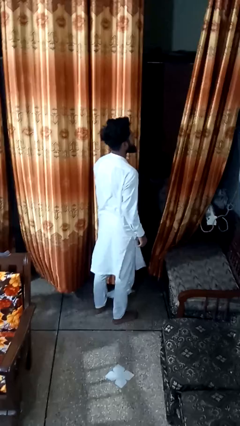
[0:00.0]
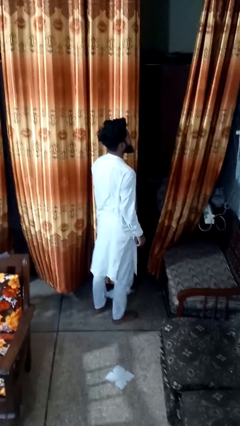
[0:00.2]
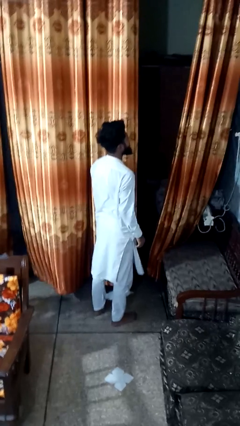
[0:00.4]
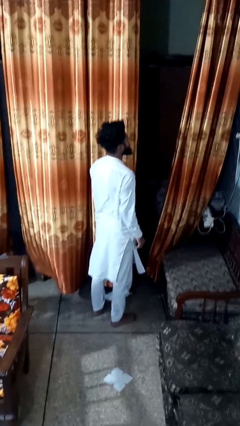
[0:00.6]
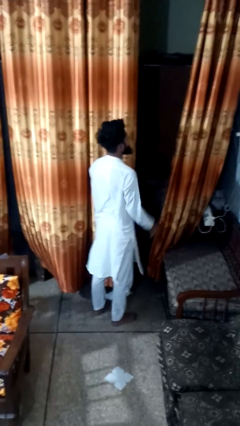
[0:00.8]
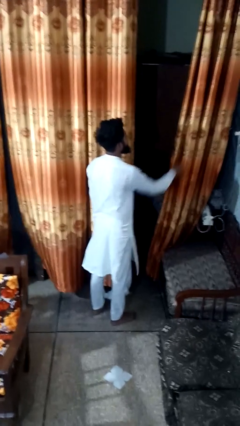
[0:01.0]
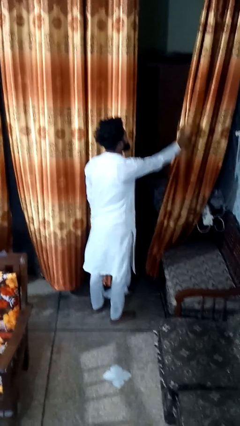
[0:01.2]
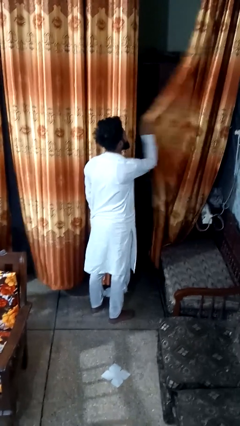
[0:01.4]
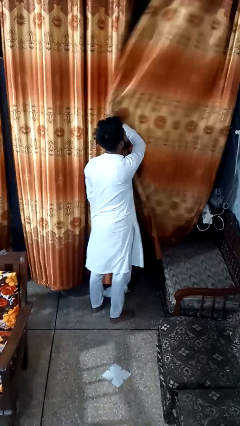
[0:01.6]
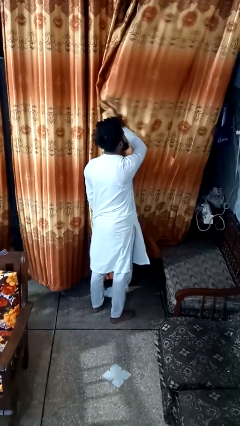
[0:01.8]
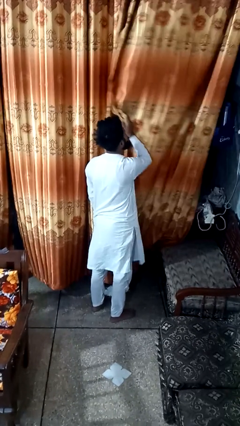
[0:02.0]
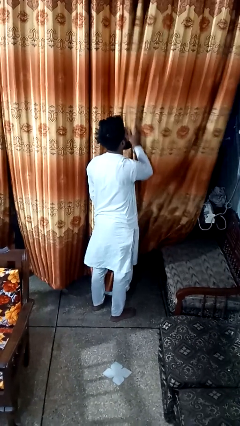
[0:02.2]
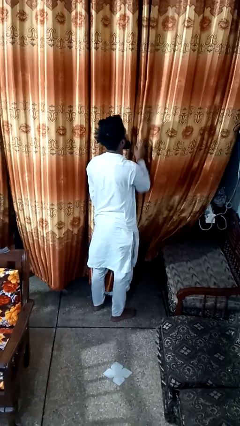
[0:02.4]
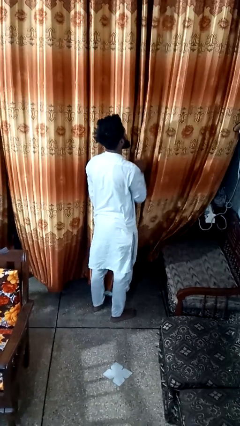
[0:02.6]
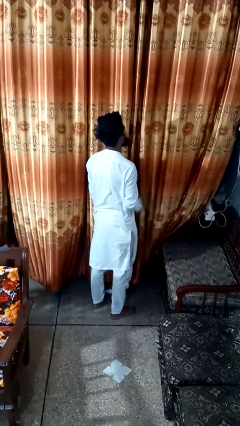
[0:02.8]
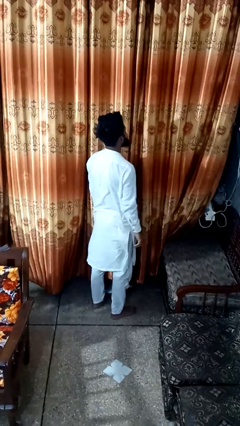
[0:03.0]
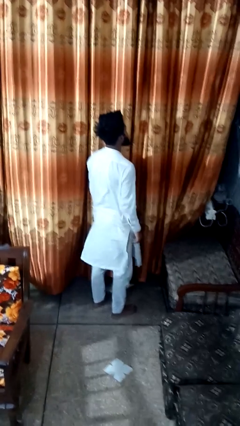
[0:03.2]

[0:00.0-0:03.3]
person closes curtains

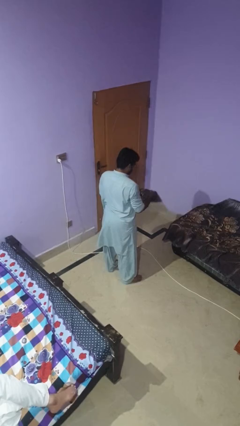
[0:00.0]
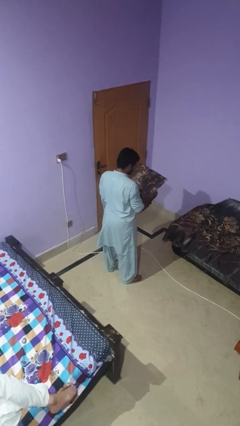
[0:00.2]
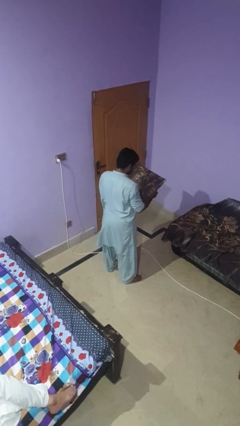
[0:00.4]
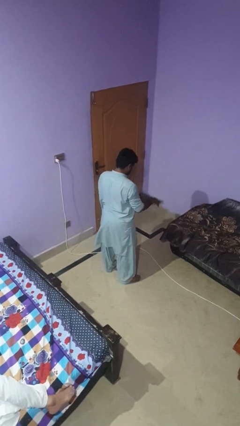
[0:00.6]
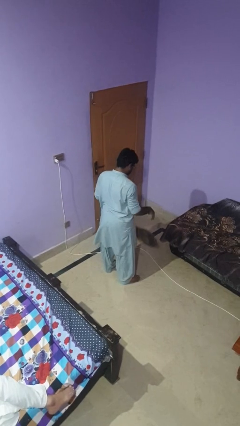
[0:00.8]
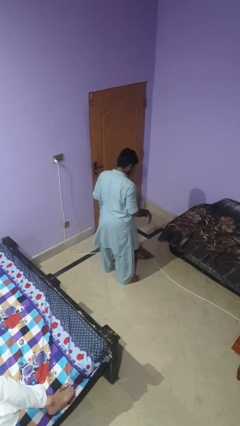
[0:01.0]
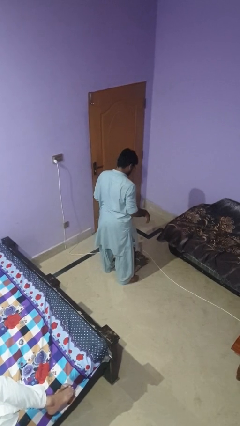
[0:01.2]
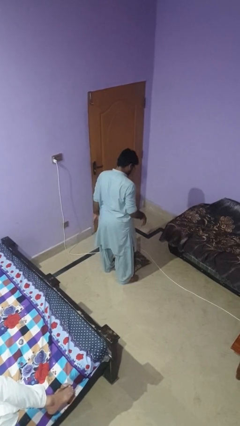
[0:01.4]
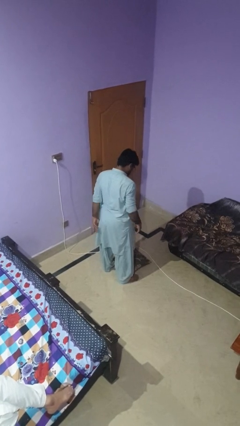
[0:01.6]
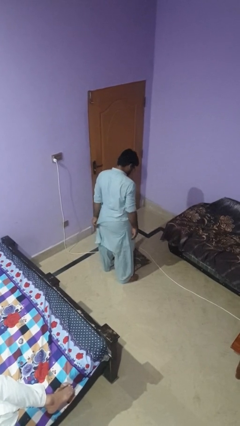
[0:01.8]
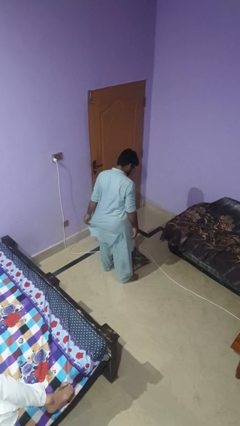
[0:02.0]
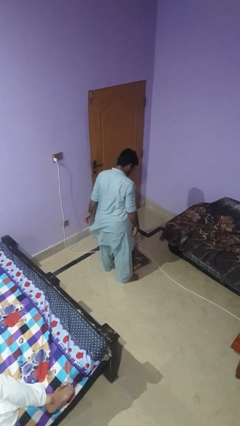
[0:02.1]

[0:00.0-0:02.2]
person drops object

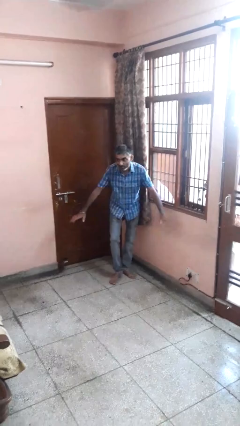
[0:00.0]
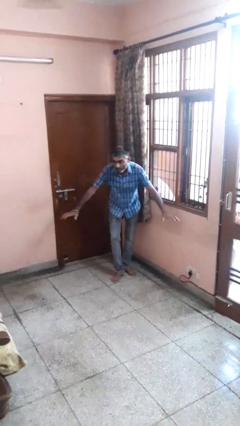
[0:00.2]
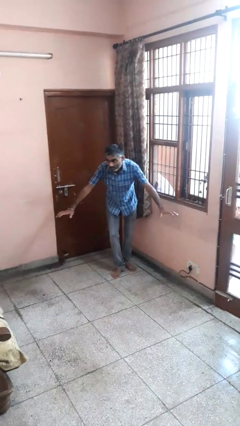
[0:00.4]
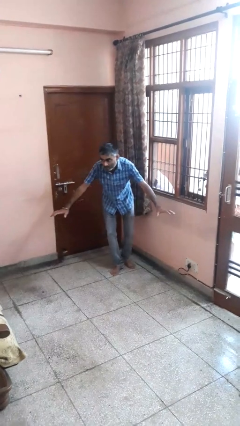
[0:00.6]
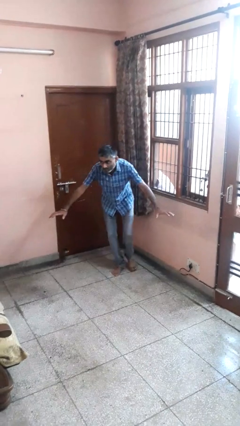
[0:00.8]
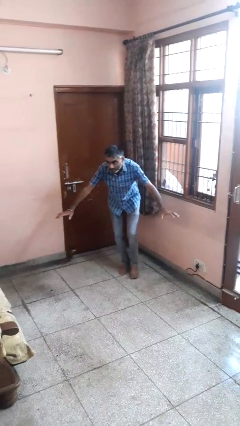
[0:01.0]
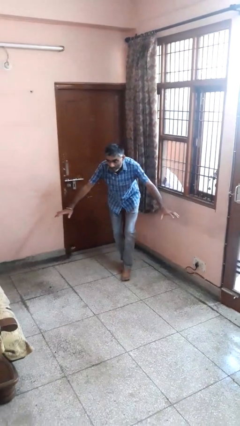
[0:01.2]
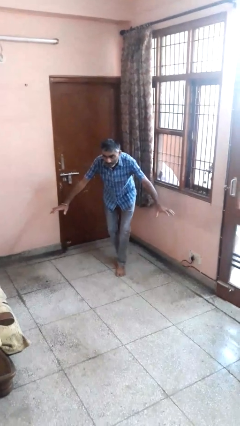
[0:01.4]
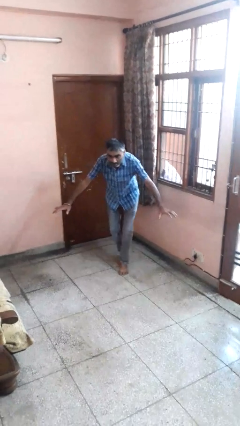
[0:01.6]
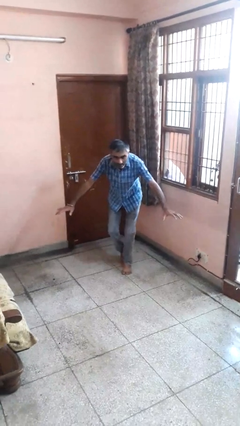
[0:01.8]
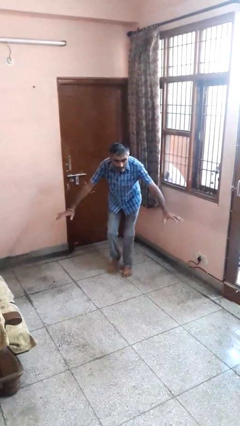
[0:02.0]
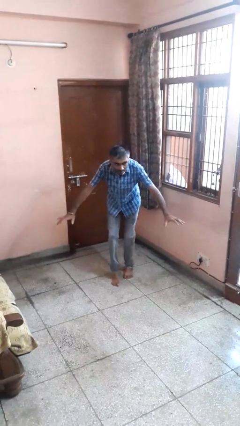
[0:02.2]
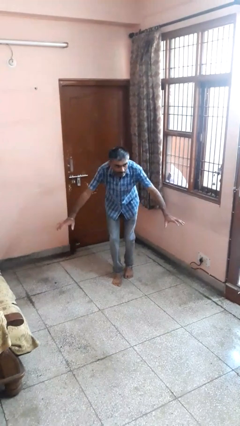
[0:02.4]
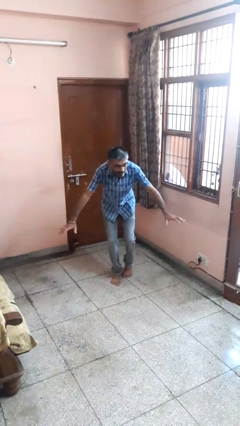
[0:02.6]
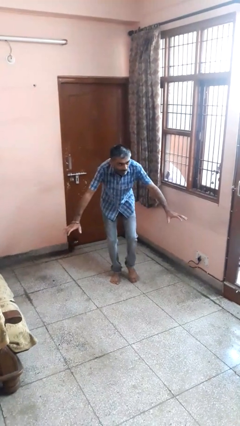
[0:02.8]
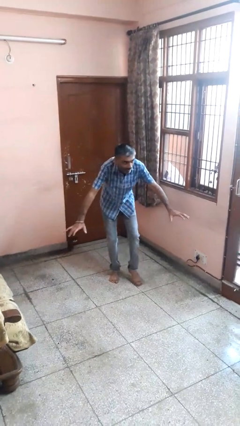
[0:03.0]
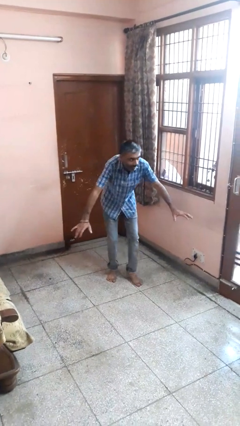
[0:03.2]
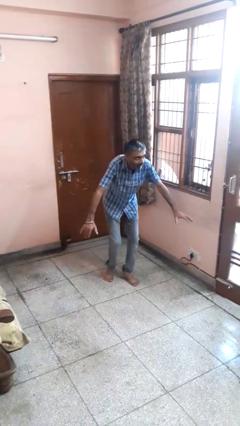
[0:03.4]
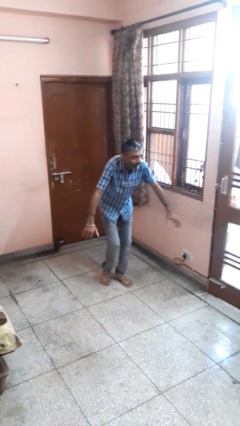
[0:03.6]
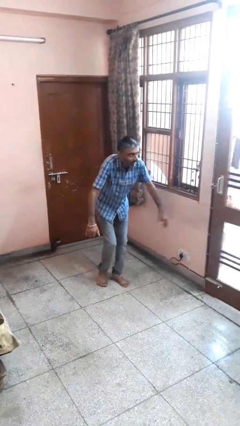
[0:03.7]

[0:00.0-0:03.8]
person walks tiptoe

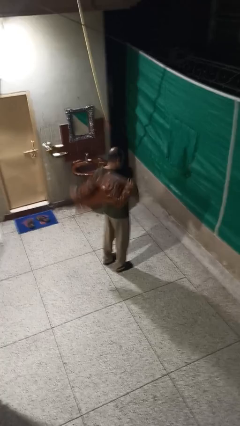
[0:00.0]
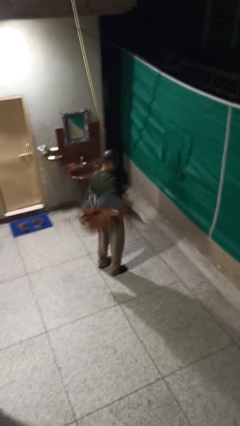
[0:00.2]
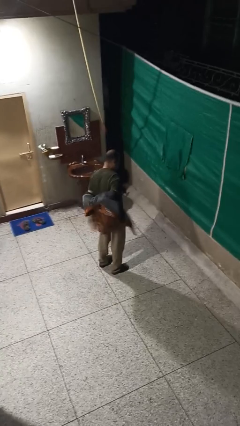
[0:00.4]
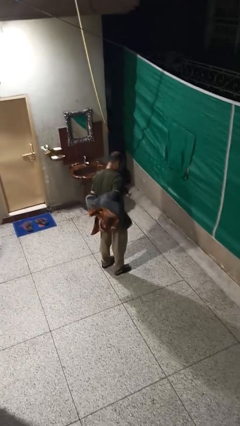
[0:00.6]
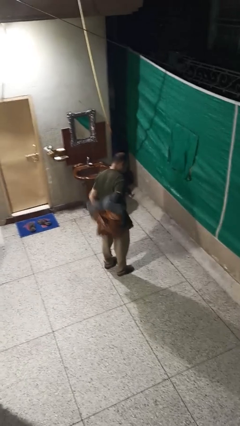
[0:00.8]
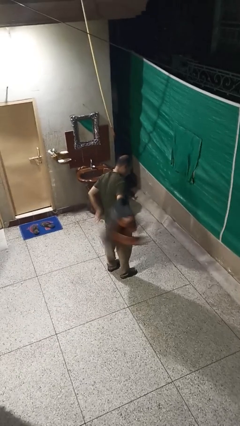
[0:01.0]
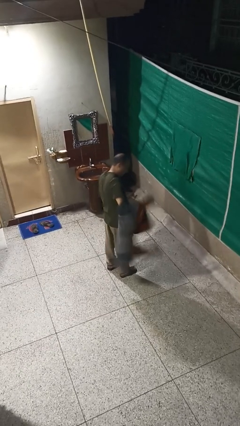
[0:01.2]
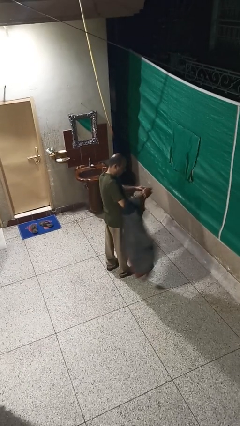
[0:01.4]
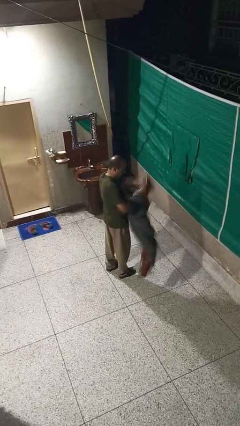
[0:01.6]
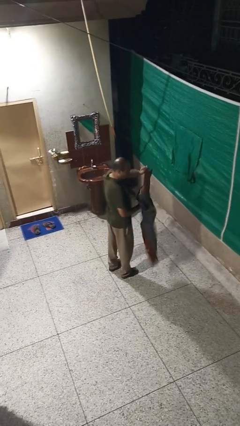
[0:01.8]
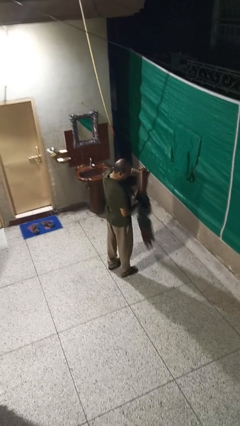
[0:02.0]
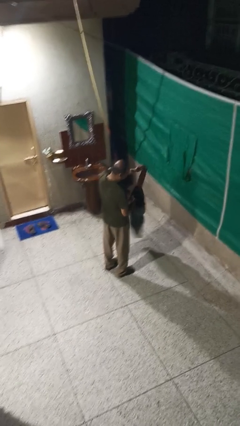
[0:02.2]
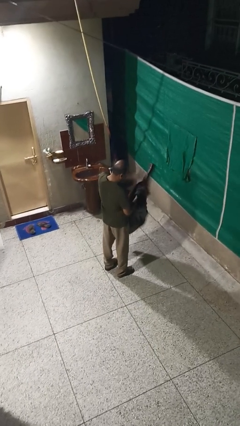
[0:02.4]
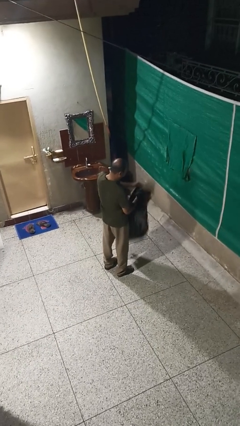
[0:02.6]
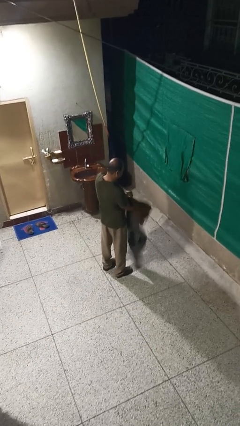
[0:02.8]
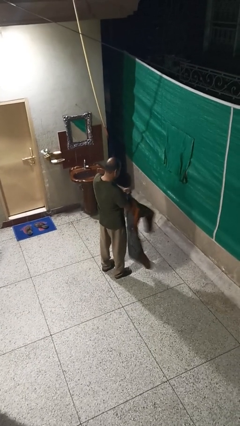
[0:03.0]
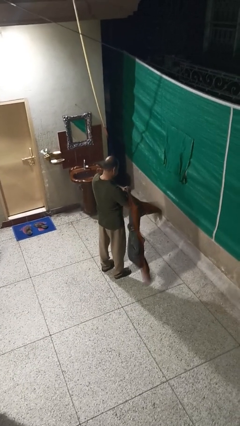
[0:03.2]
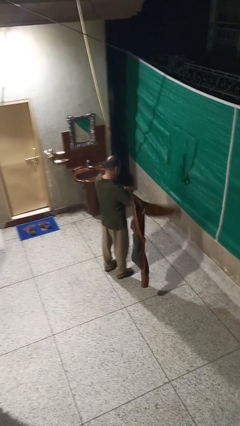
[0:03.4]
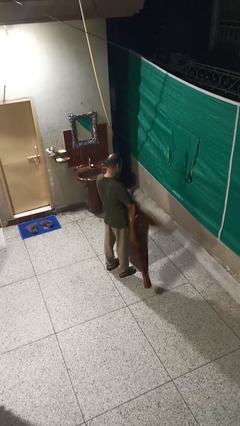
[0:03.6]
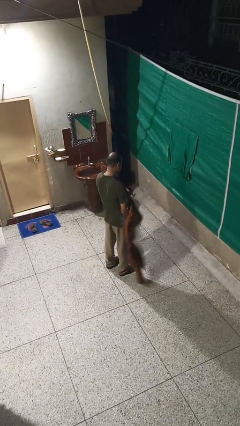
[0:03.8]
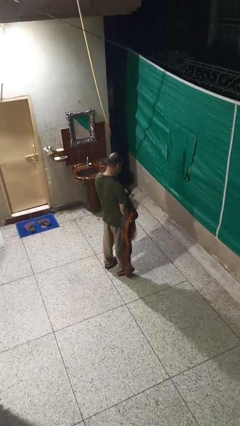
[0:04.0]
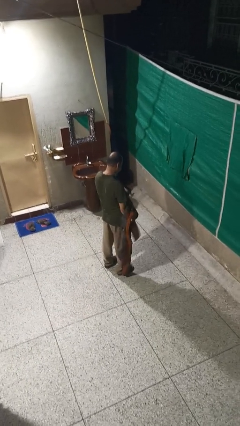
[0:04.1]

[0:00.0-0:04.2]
person takes off jacket

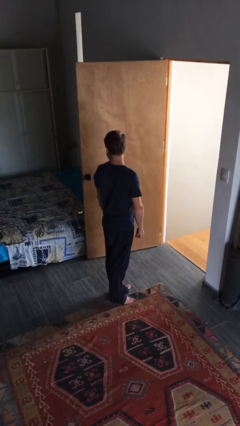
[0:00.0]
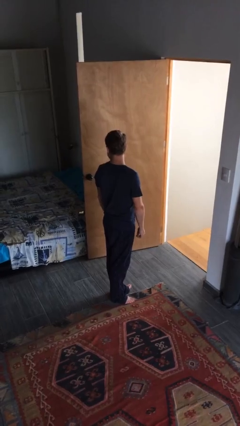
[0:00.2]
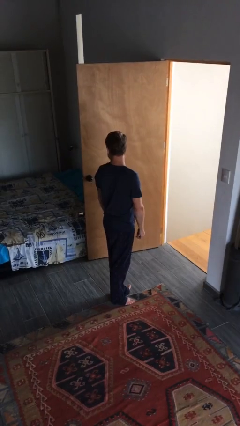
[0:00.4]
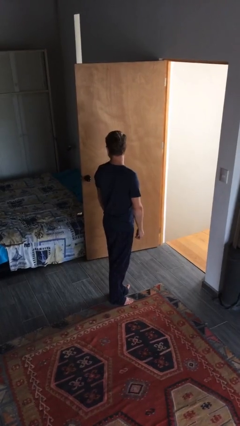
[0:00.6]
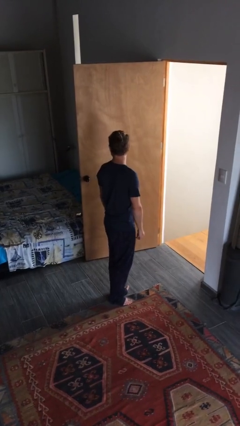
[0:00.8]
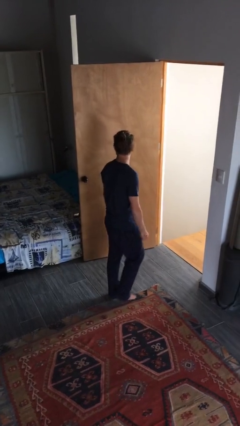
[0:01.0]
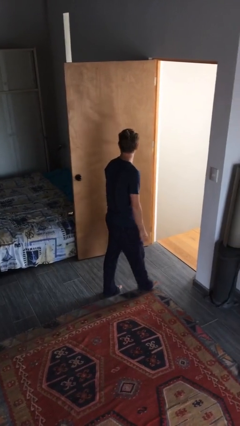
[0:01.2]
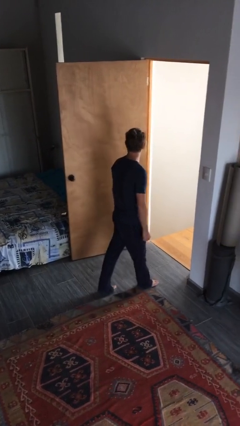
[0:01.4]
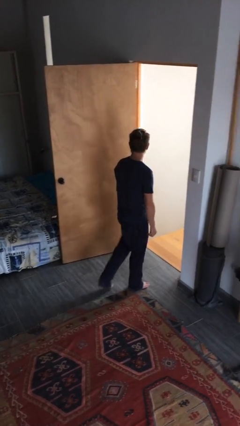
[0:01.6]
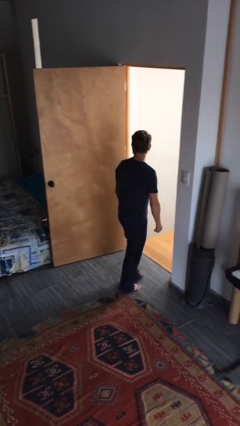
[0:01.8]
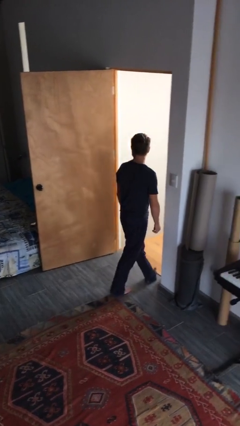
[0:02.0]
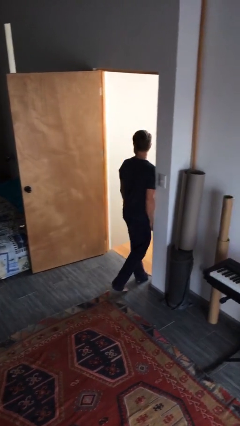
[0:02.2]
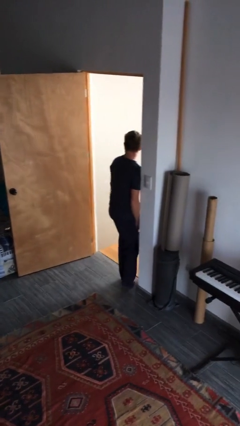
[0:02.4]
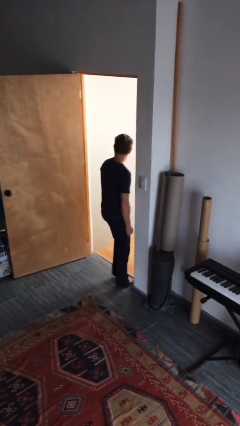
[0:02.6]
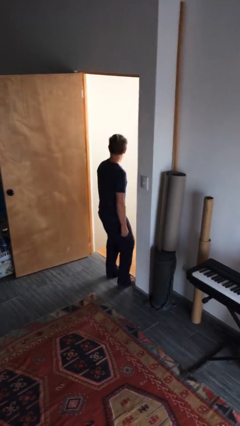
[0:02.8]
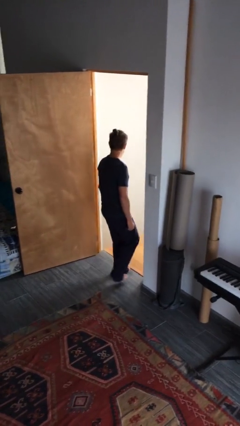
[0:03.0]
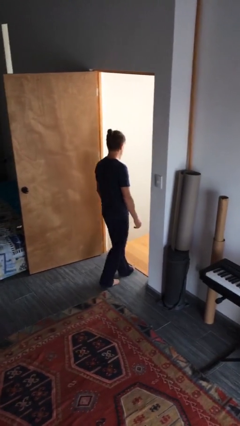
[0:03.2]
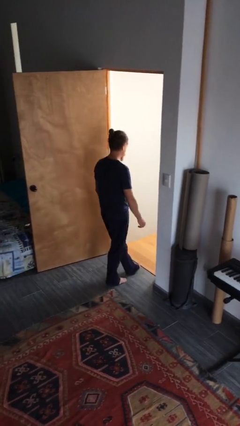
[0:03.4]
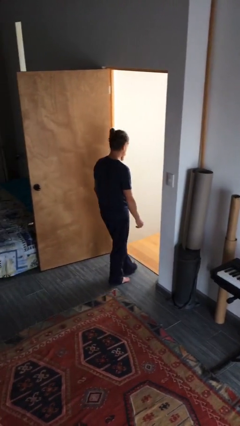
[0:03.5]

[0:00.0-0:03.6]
person bumps into wall

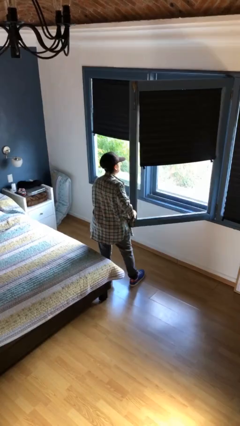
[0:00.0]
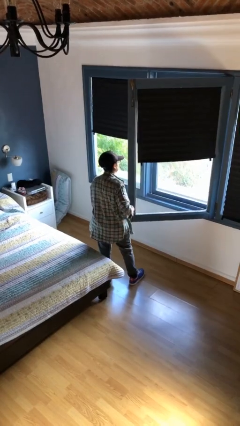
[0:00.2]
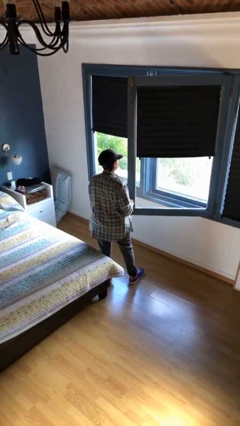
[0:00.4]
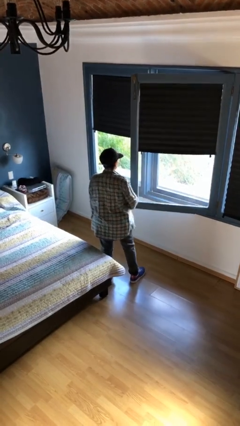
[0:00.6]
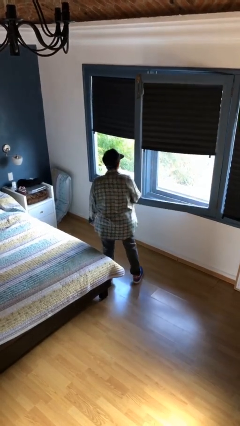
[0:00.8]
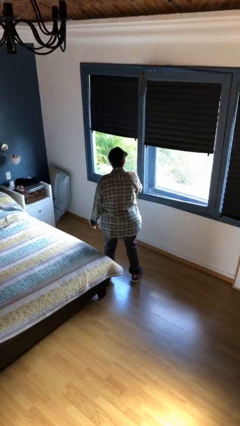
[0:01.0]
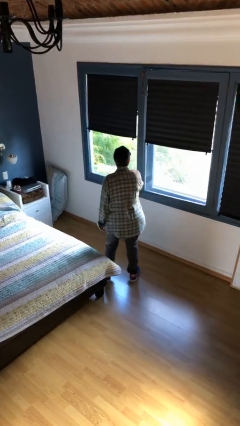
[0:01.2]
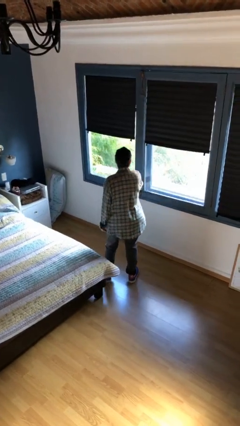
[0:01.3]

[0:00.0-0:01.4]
person closes home window
